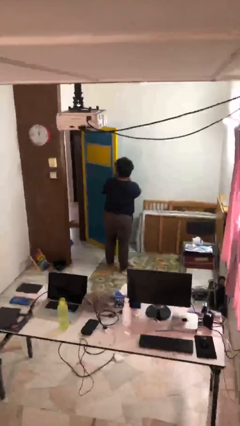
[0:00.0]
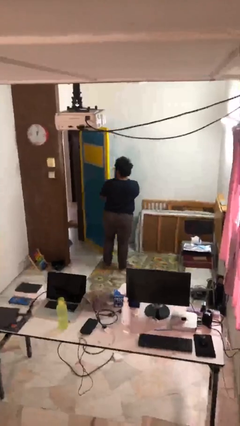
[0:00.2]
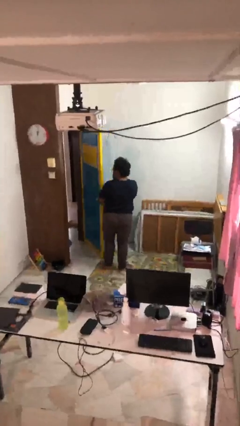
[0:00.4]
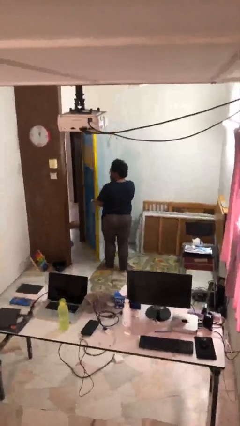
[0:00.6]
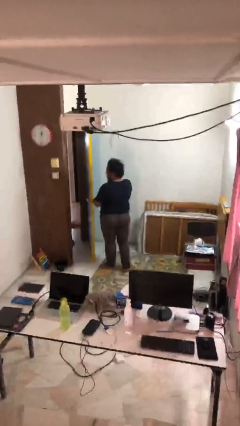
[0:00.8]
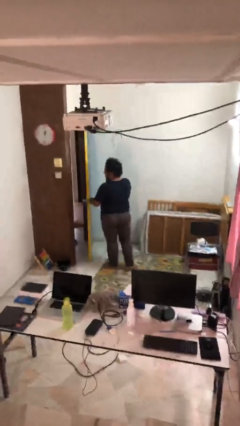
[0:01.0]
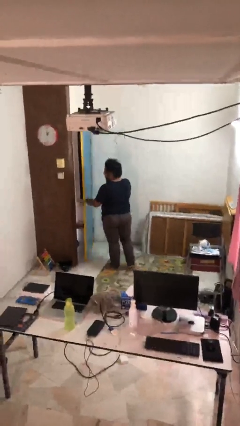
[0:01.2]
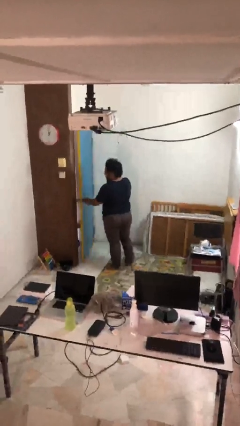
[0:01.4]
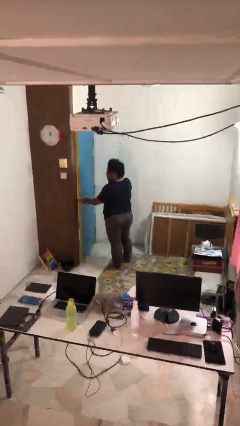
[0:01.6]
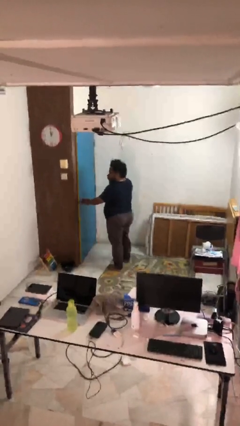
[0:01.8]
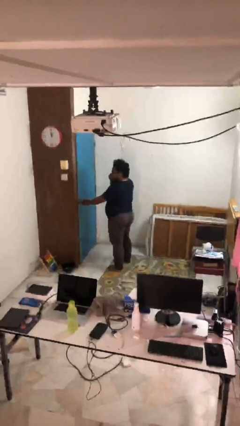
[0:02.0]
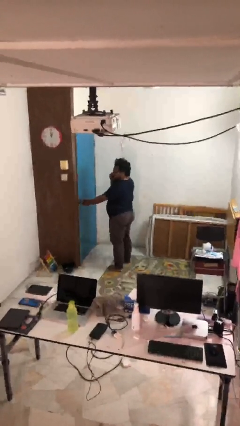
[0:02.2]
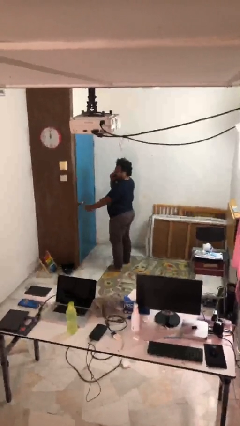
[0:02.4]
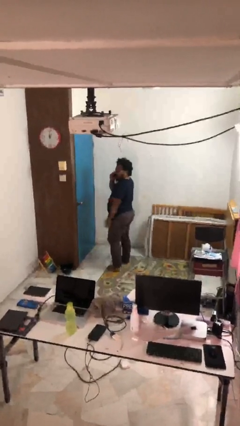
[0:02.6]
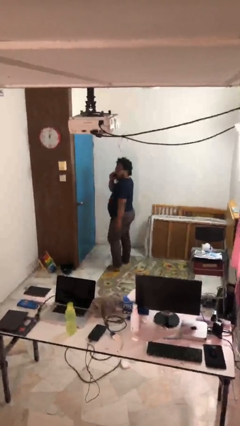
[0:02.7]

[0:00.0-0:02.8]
person closes facility door

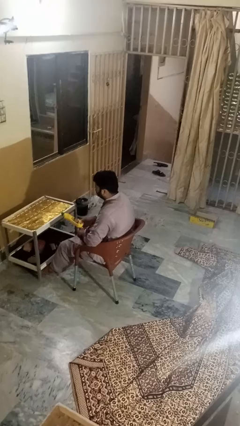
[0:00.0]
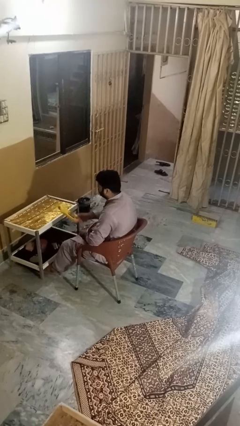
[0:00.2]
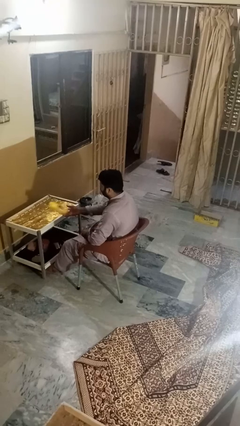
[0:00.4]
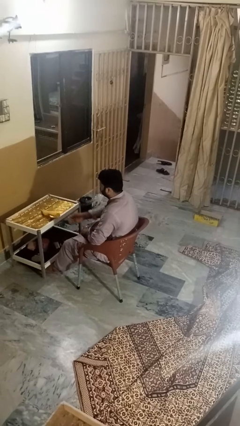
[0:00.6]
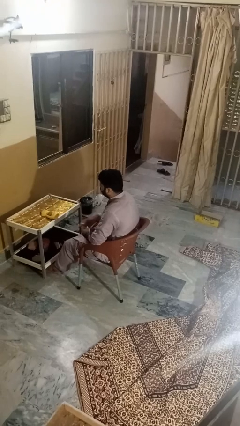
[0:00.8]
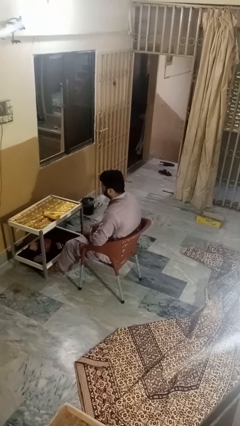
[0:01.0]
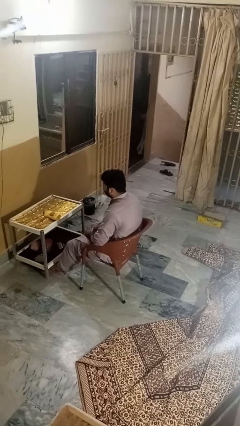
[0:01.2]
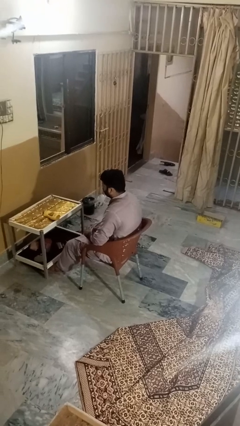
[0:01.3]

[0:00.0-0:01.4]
person throws object on table

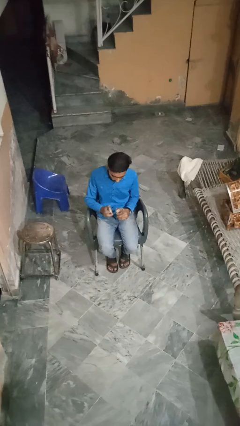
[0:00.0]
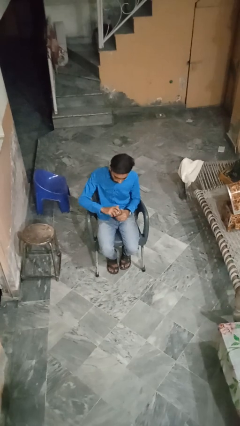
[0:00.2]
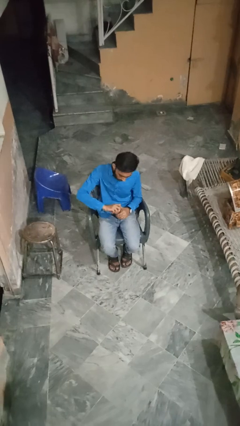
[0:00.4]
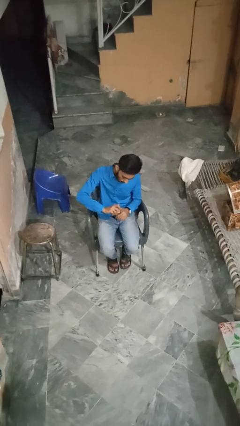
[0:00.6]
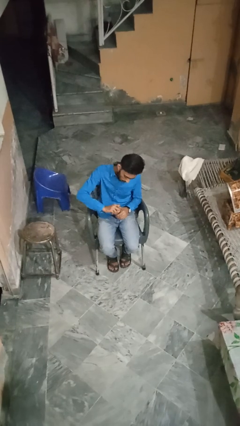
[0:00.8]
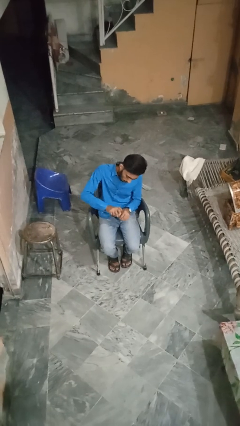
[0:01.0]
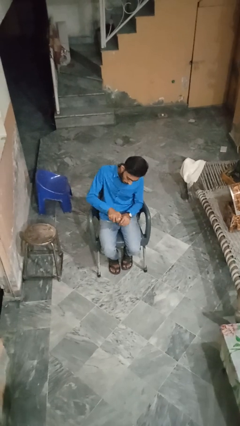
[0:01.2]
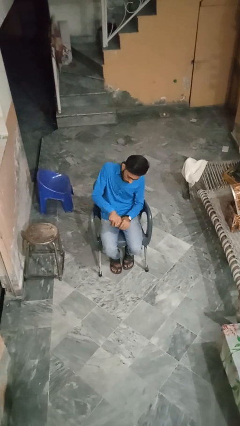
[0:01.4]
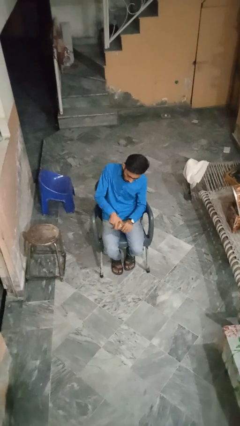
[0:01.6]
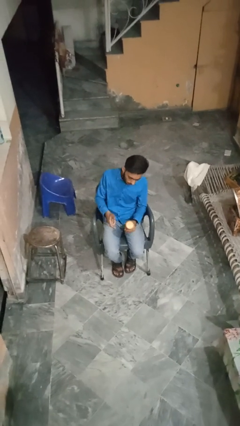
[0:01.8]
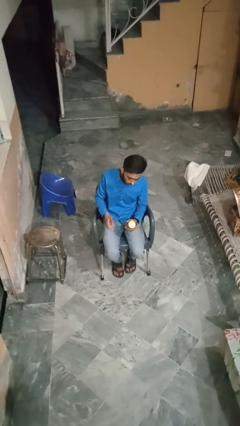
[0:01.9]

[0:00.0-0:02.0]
person closes jar

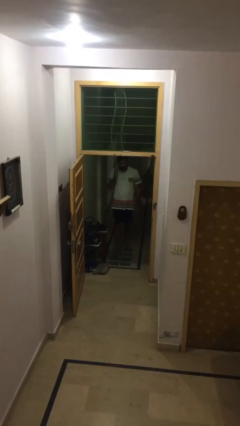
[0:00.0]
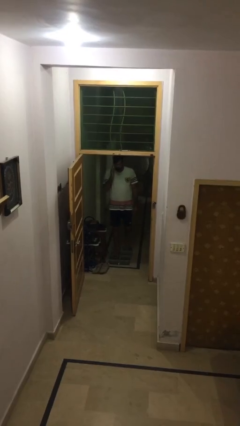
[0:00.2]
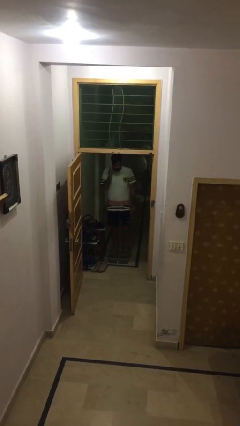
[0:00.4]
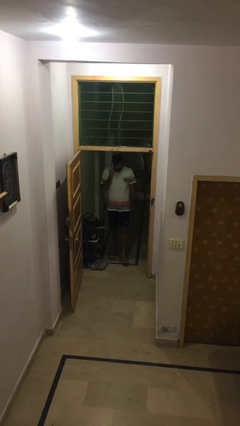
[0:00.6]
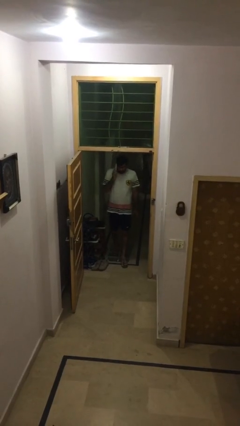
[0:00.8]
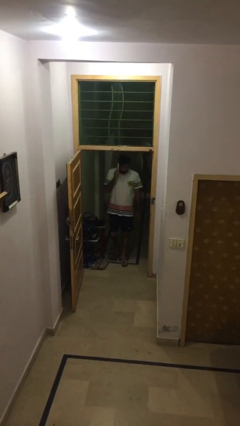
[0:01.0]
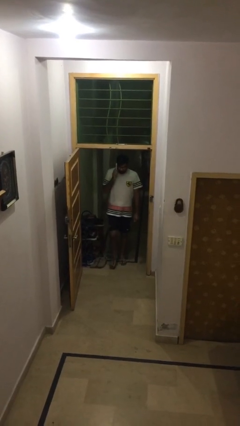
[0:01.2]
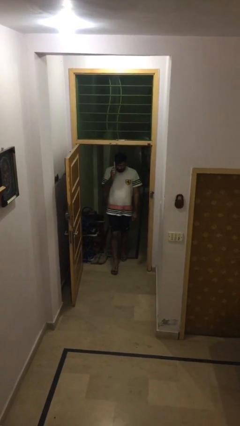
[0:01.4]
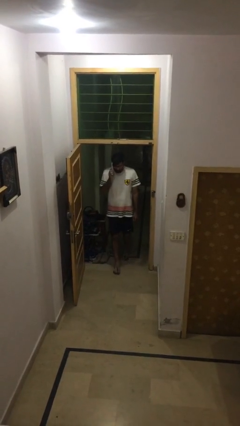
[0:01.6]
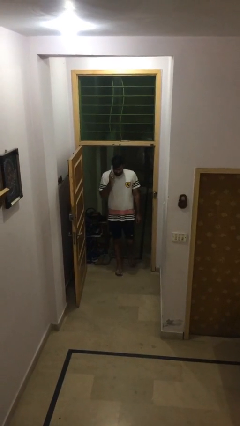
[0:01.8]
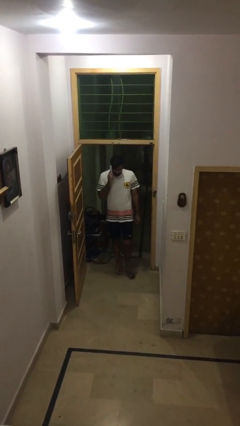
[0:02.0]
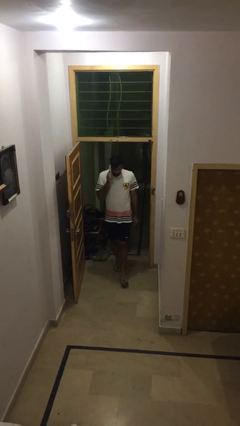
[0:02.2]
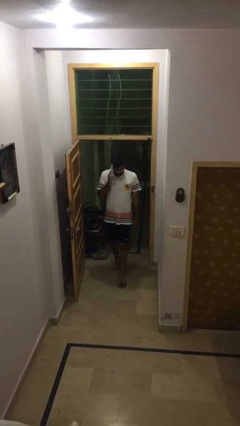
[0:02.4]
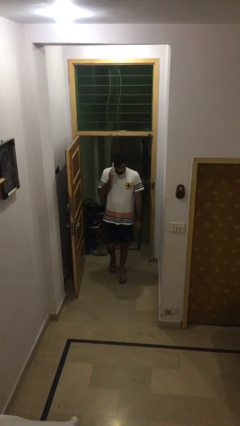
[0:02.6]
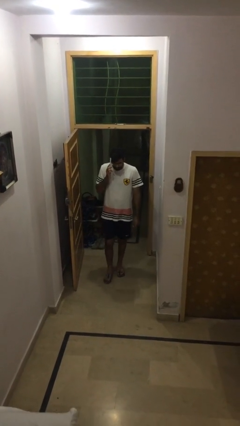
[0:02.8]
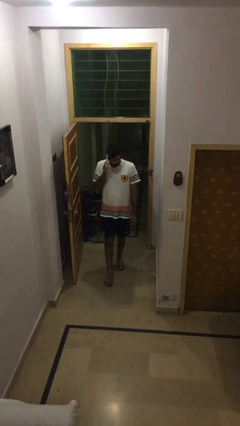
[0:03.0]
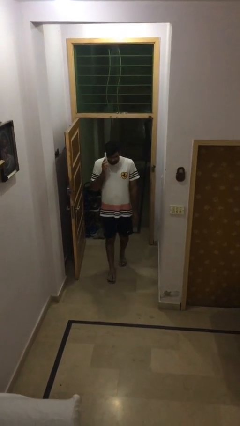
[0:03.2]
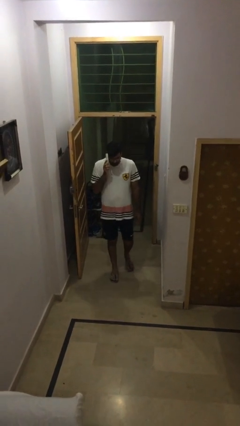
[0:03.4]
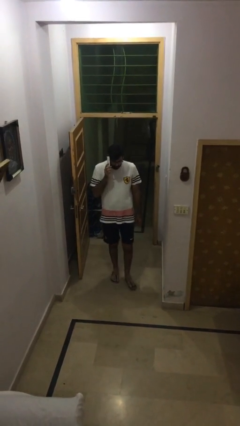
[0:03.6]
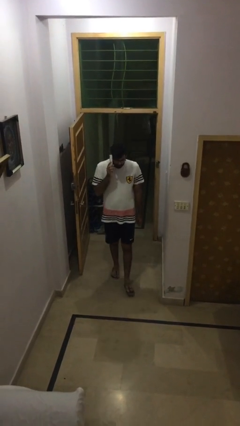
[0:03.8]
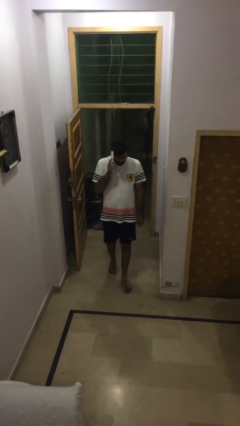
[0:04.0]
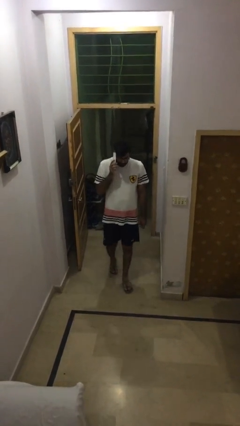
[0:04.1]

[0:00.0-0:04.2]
person enters scene through structure

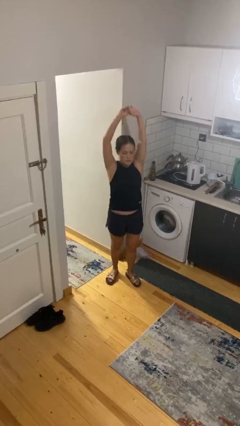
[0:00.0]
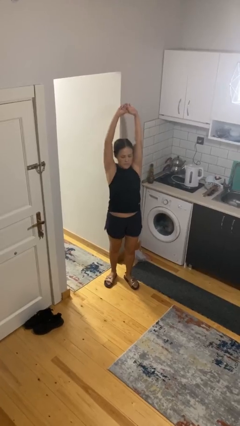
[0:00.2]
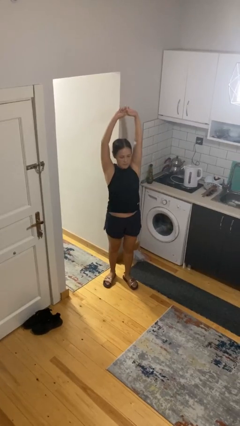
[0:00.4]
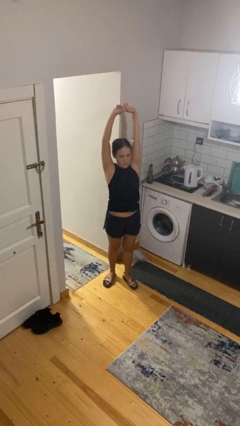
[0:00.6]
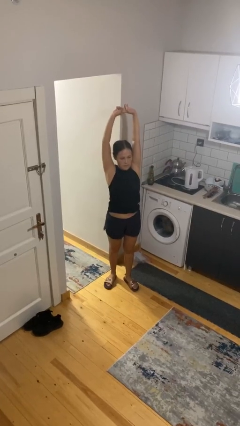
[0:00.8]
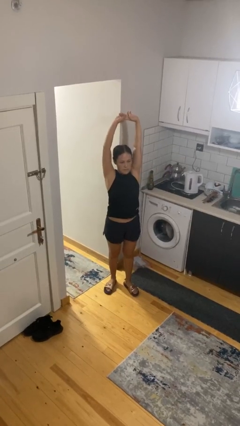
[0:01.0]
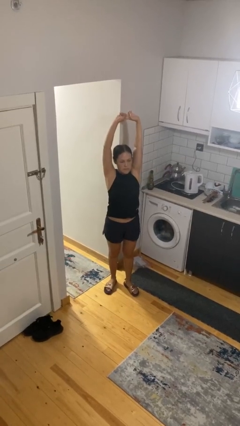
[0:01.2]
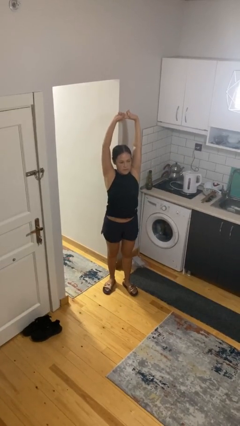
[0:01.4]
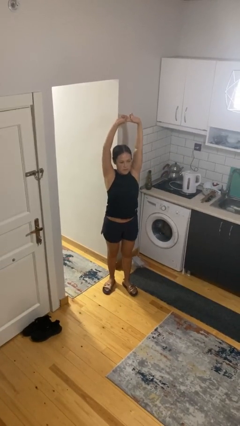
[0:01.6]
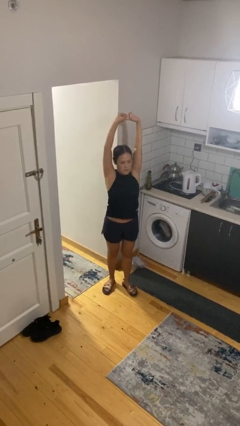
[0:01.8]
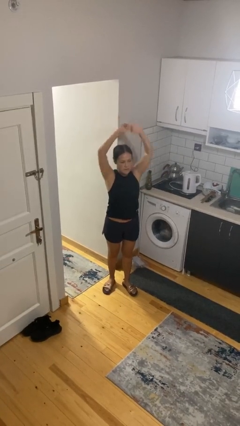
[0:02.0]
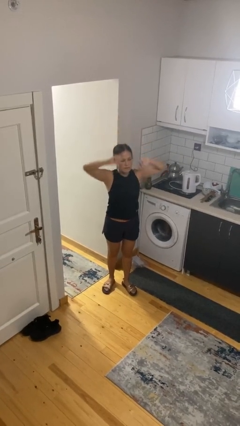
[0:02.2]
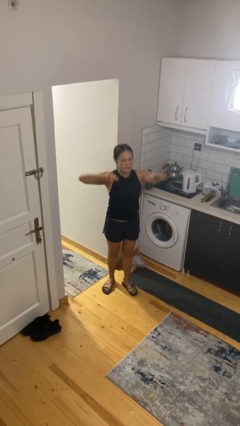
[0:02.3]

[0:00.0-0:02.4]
person stretches arms over head

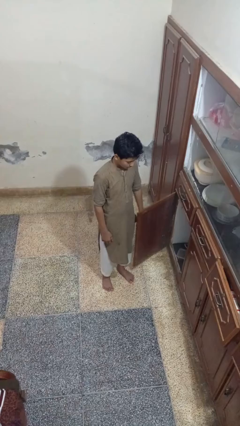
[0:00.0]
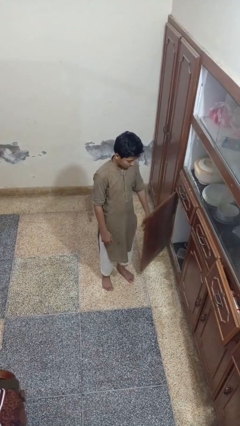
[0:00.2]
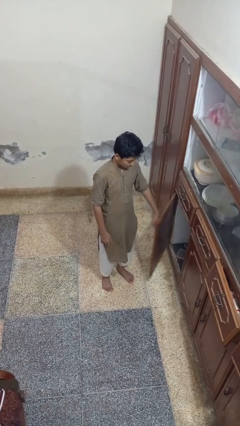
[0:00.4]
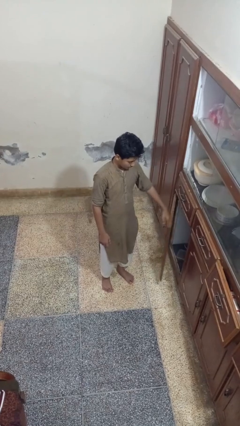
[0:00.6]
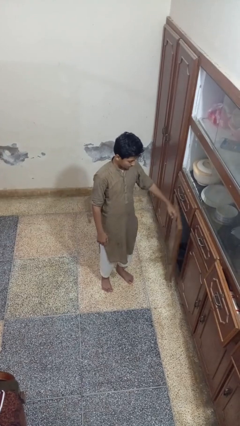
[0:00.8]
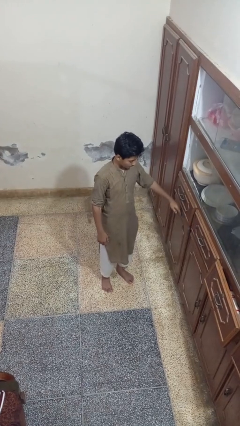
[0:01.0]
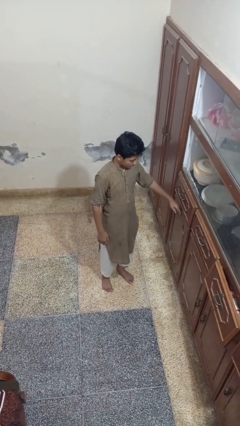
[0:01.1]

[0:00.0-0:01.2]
person closes cabinet

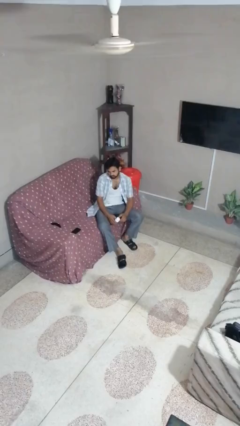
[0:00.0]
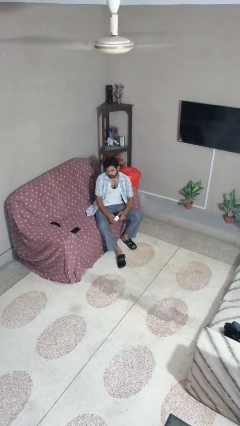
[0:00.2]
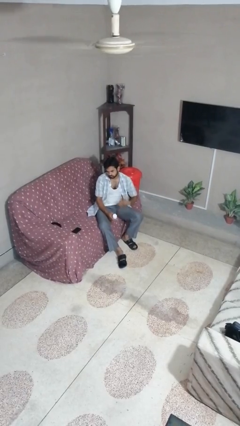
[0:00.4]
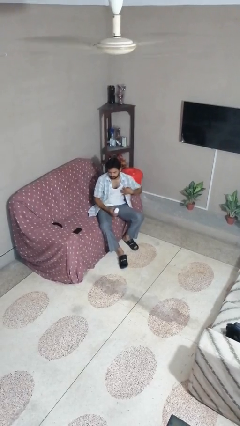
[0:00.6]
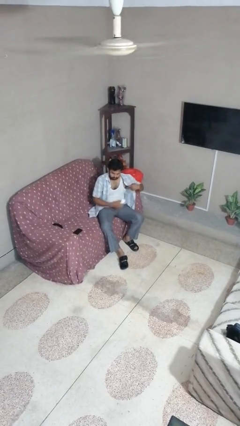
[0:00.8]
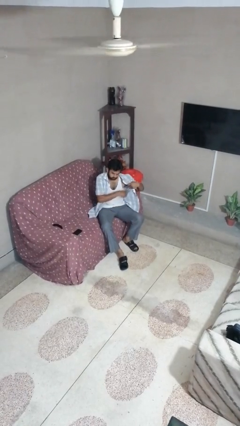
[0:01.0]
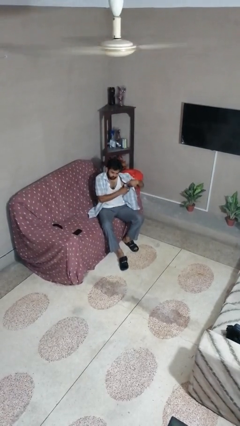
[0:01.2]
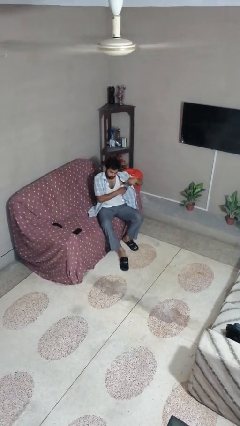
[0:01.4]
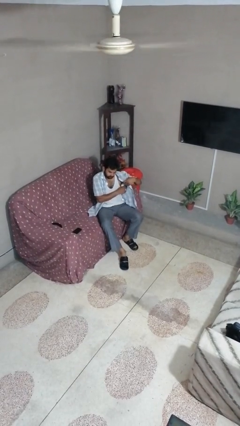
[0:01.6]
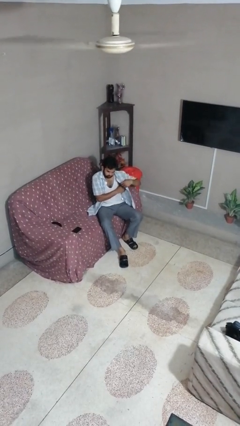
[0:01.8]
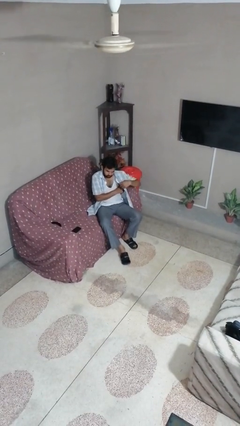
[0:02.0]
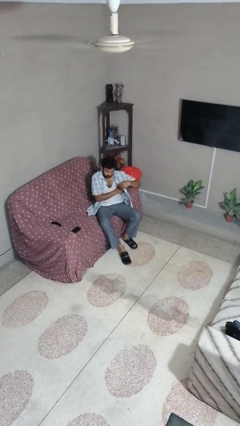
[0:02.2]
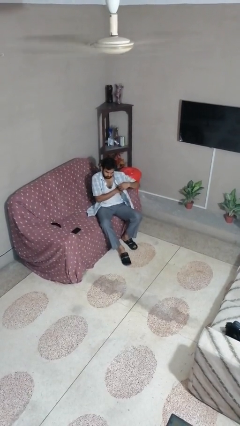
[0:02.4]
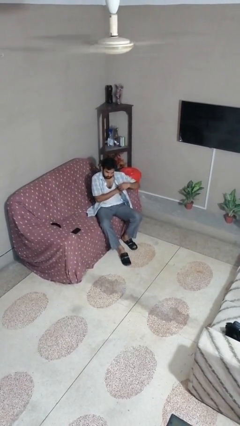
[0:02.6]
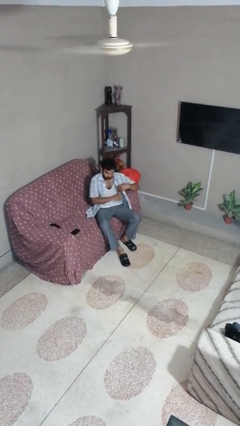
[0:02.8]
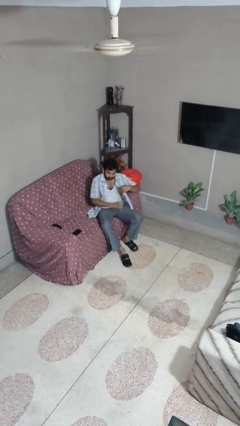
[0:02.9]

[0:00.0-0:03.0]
person applies deodorant
